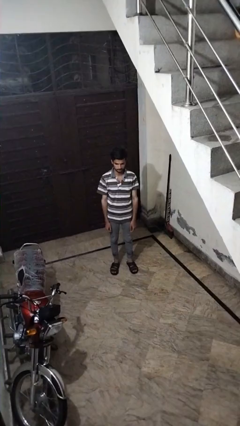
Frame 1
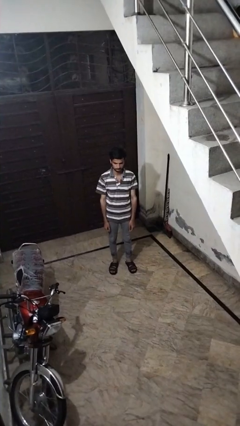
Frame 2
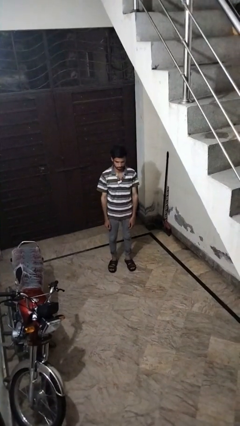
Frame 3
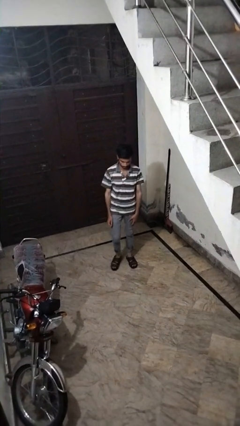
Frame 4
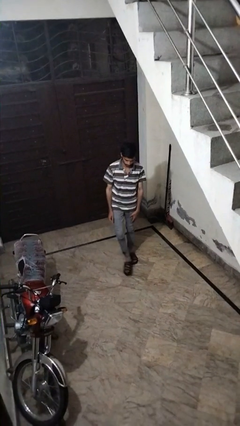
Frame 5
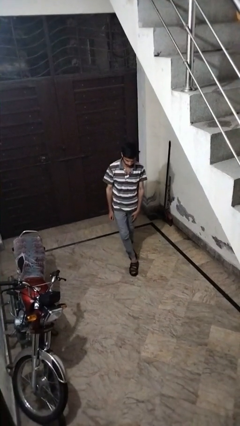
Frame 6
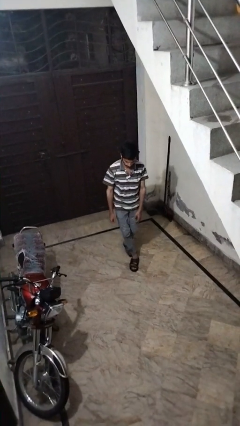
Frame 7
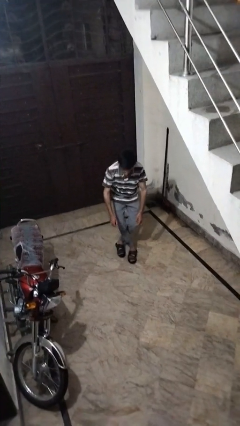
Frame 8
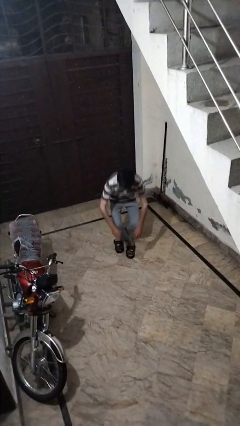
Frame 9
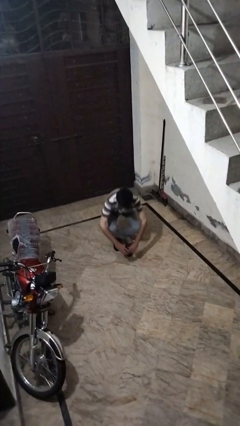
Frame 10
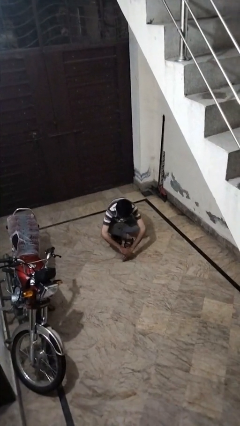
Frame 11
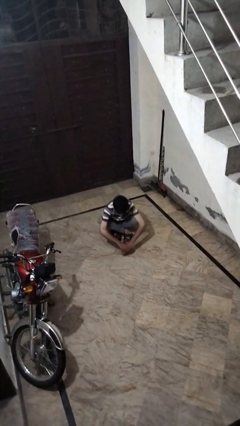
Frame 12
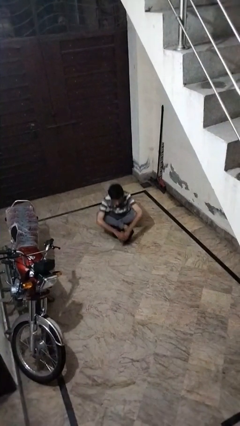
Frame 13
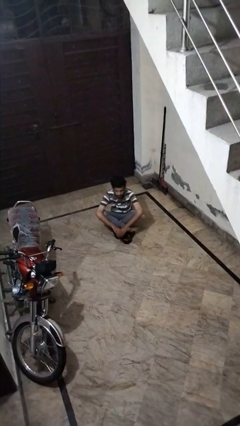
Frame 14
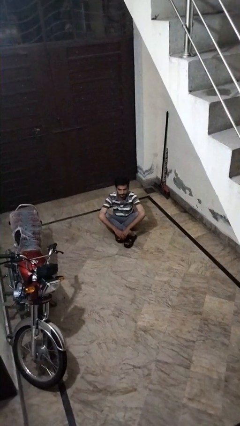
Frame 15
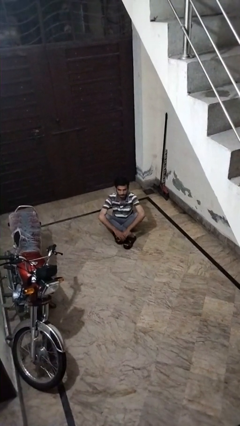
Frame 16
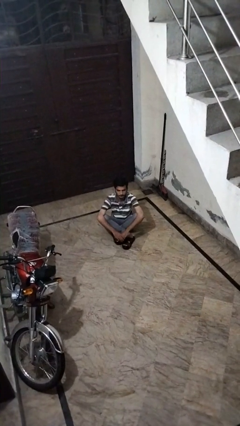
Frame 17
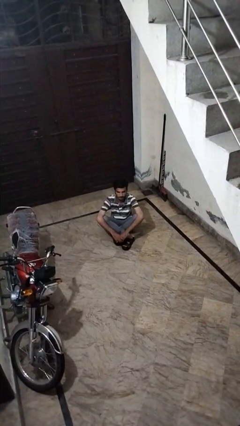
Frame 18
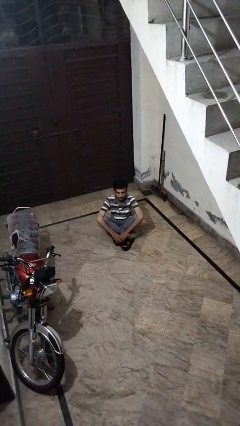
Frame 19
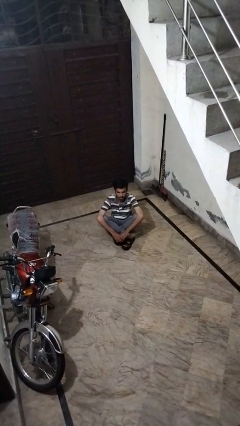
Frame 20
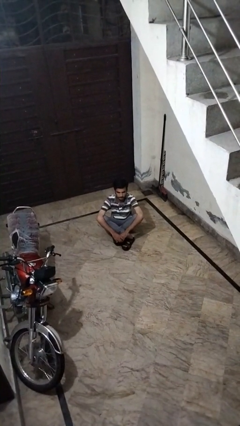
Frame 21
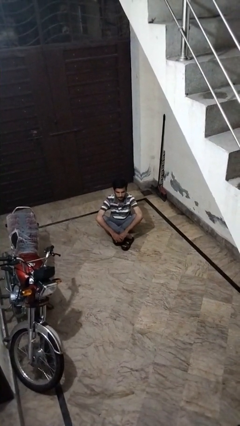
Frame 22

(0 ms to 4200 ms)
person sits crisscross

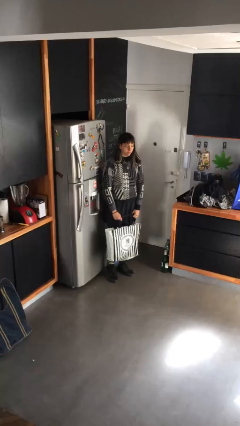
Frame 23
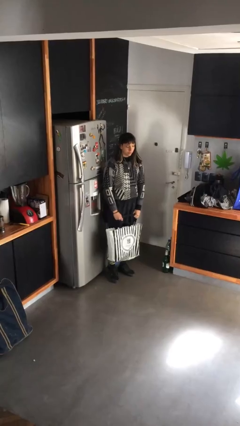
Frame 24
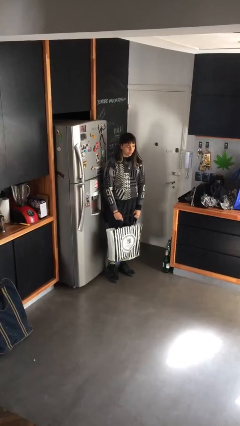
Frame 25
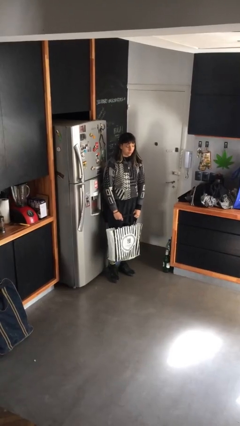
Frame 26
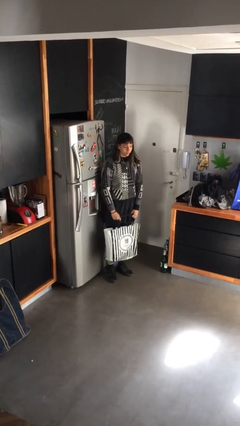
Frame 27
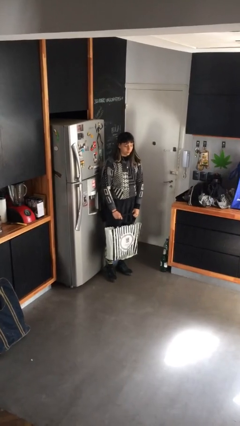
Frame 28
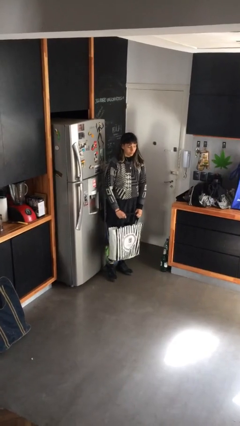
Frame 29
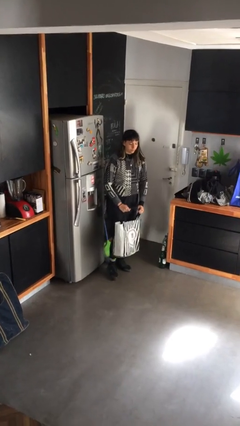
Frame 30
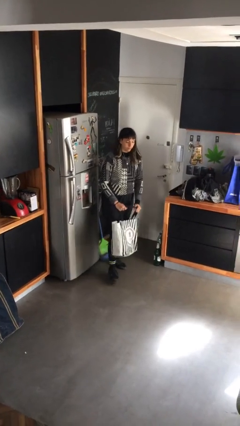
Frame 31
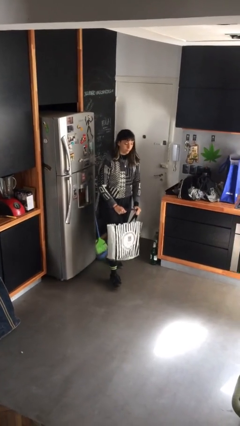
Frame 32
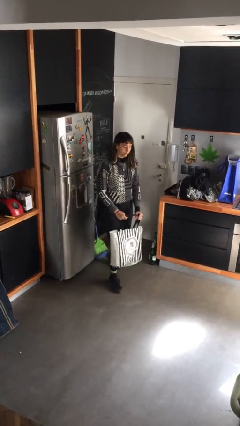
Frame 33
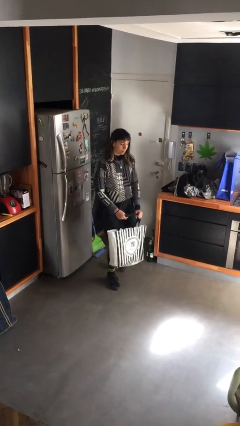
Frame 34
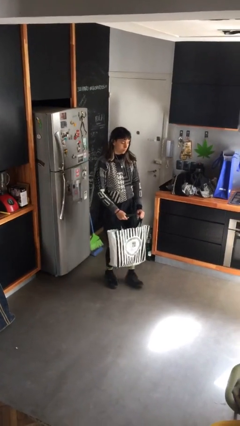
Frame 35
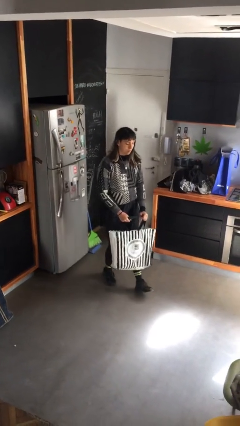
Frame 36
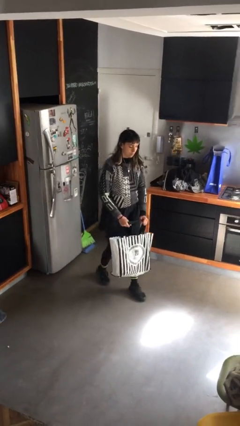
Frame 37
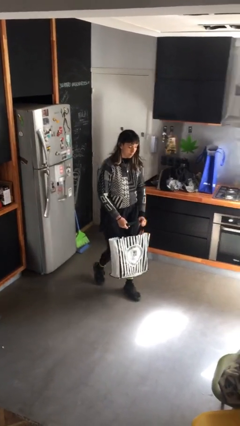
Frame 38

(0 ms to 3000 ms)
person carries heavy object

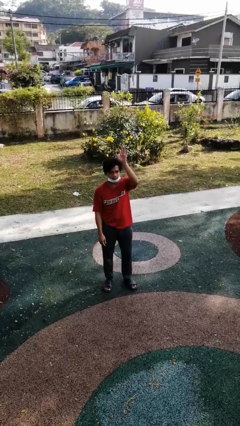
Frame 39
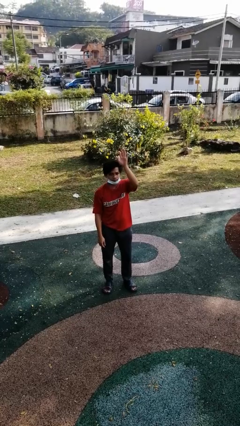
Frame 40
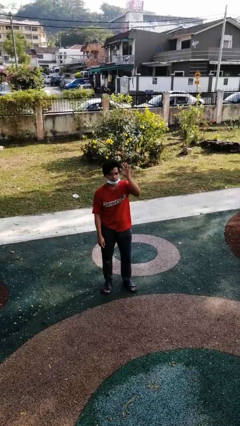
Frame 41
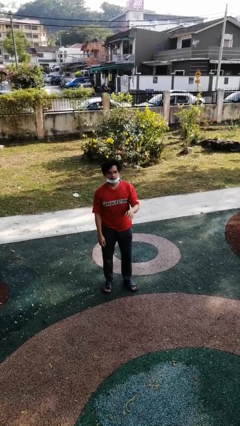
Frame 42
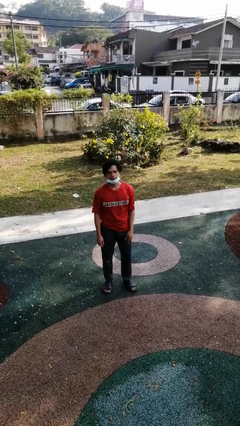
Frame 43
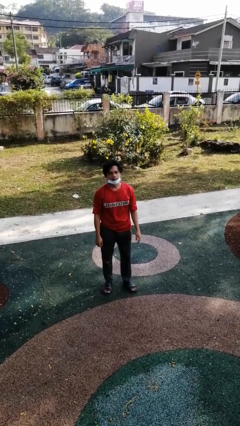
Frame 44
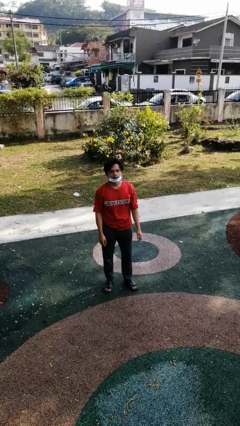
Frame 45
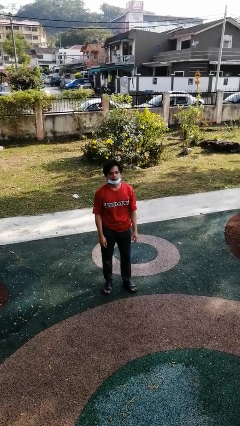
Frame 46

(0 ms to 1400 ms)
person gestures lower hand

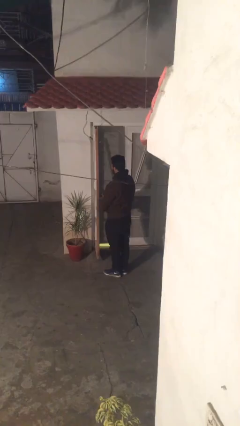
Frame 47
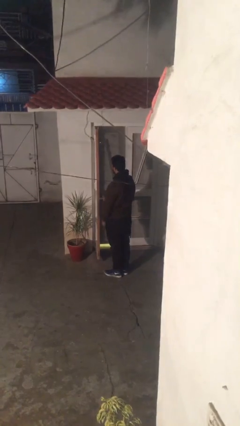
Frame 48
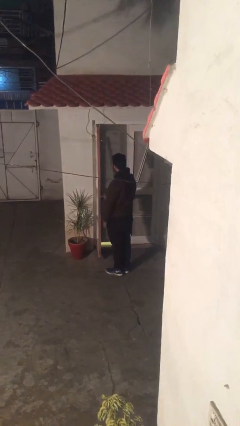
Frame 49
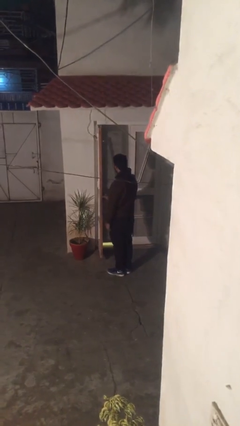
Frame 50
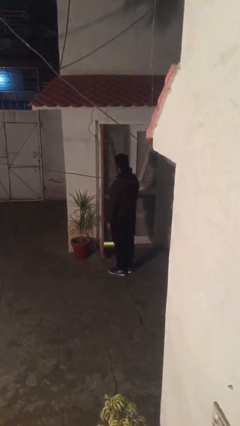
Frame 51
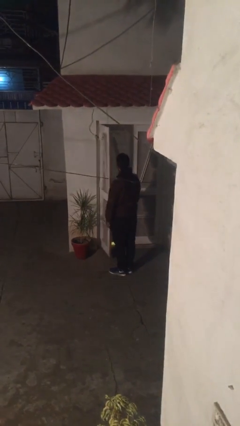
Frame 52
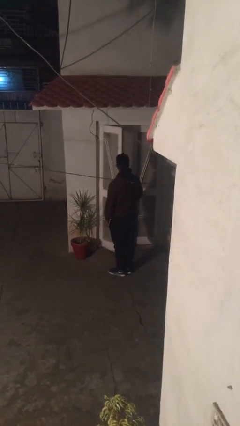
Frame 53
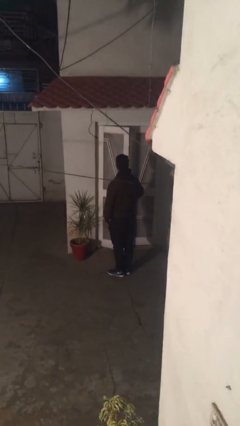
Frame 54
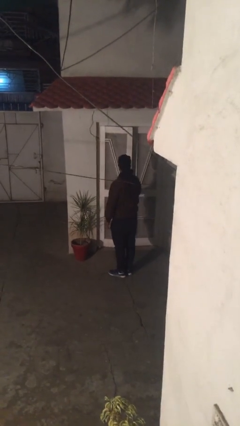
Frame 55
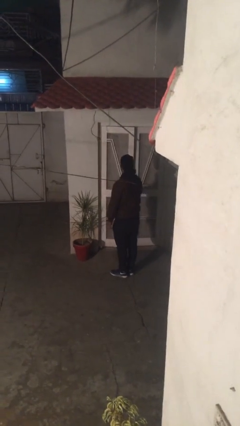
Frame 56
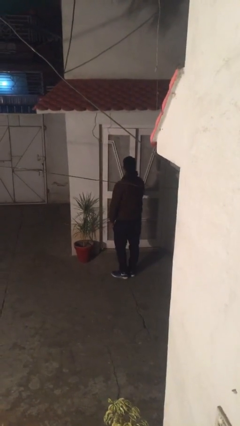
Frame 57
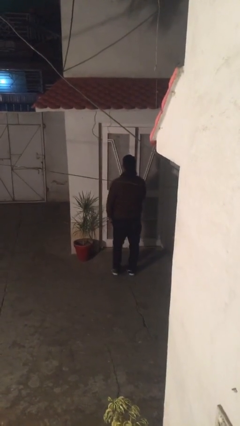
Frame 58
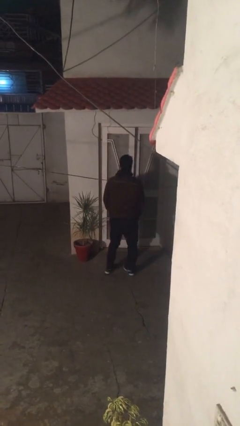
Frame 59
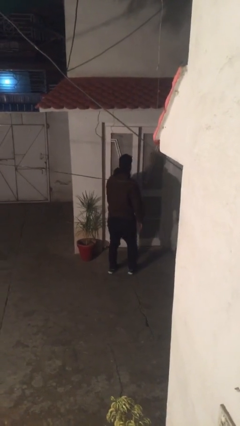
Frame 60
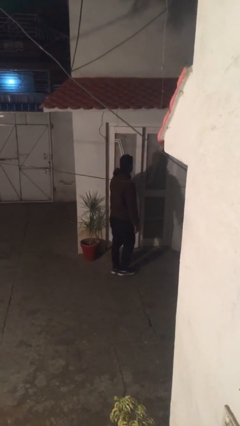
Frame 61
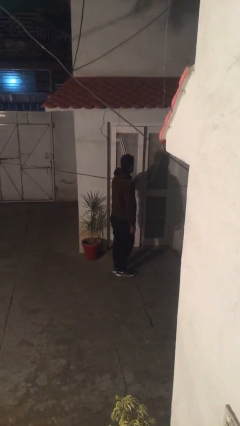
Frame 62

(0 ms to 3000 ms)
person closes facility door

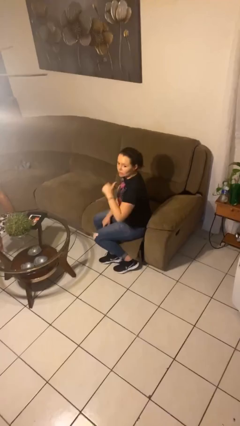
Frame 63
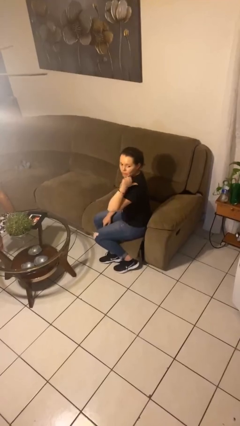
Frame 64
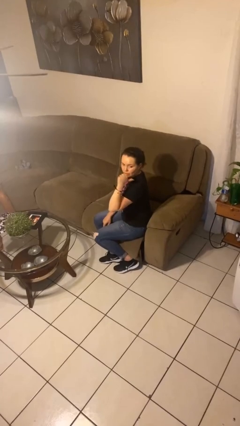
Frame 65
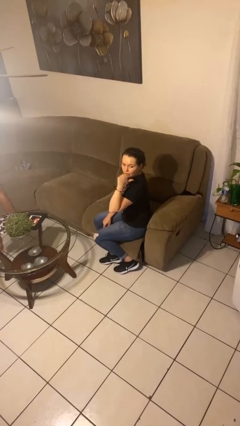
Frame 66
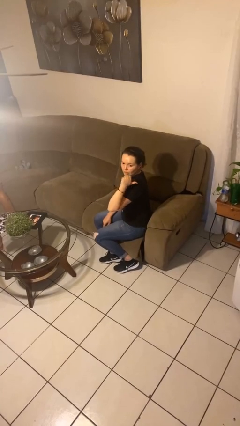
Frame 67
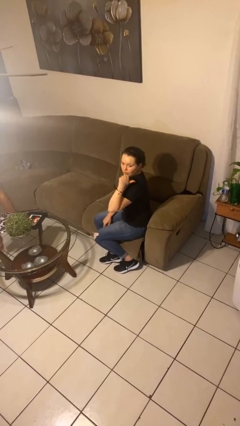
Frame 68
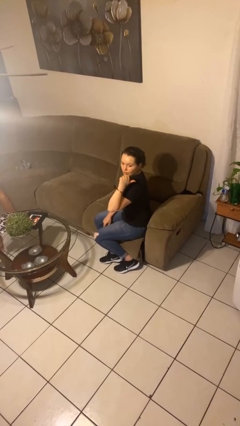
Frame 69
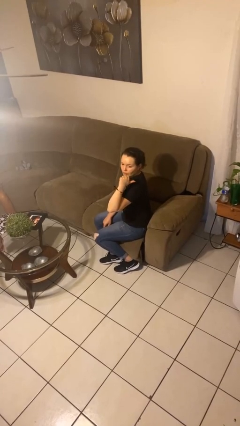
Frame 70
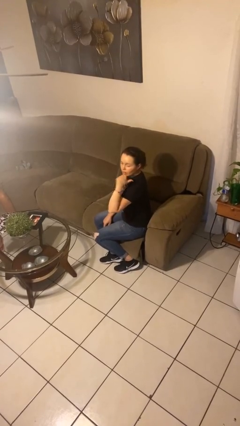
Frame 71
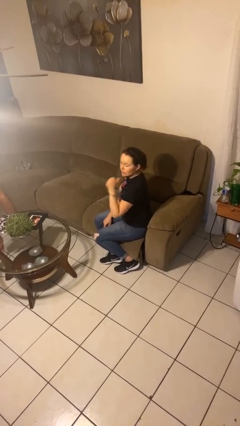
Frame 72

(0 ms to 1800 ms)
person gestures behind me

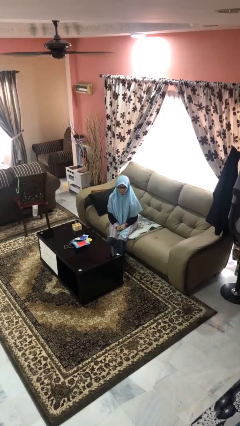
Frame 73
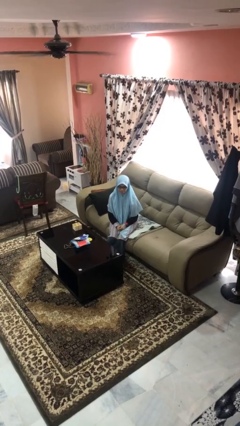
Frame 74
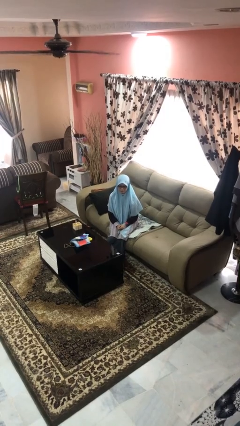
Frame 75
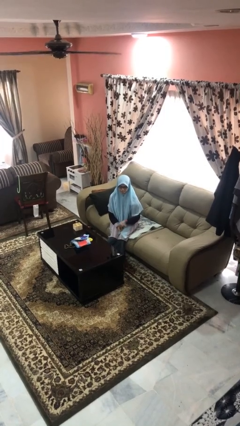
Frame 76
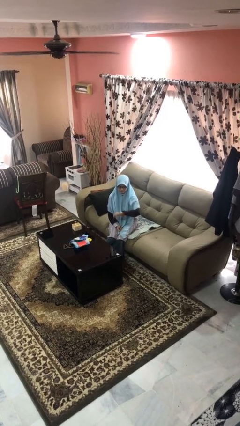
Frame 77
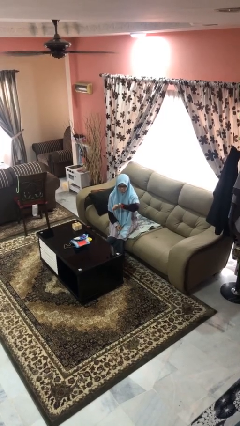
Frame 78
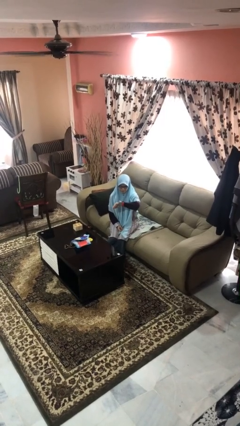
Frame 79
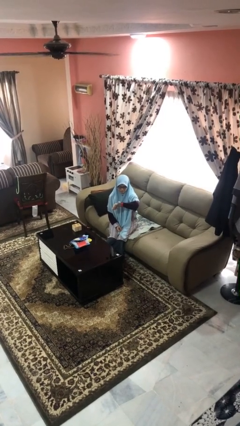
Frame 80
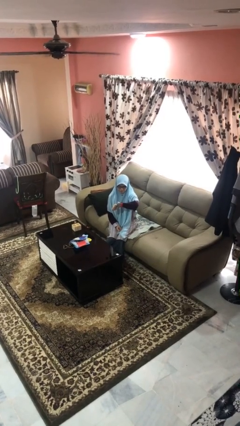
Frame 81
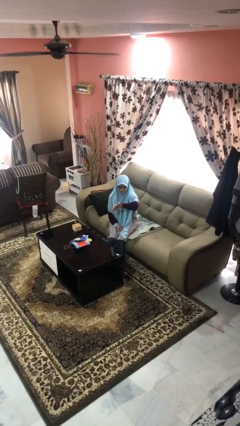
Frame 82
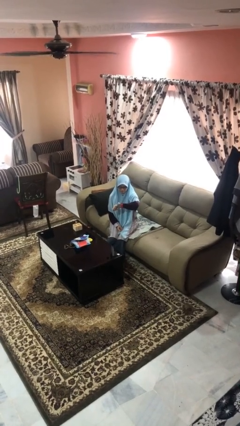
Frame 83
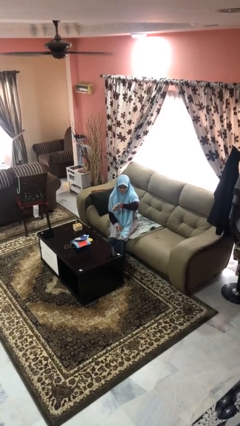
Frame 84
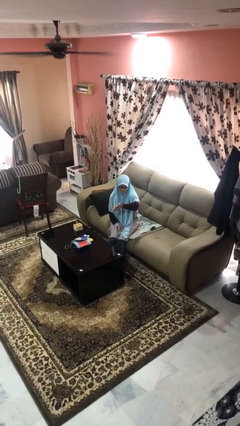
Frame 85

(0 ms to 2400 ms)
person looks at wristwatch

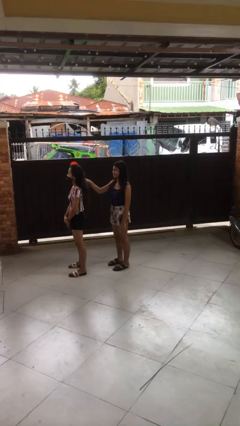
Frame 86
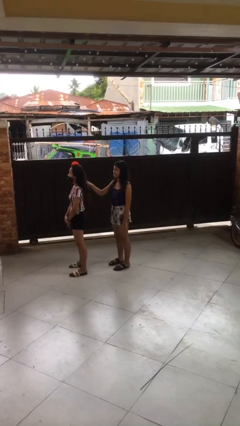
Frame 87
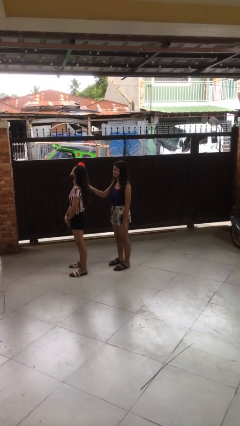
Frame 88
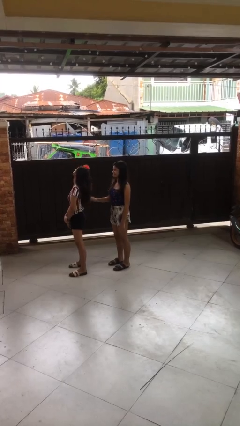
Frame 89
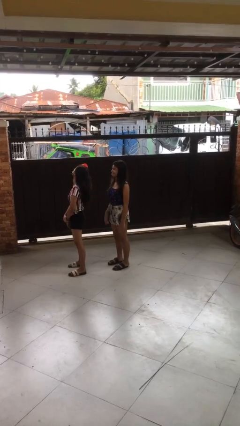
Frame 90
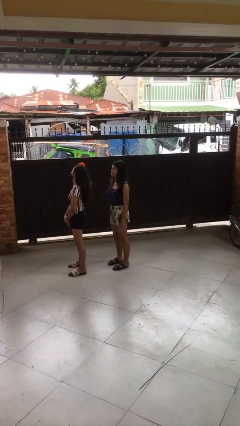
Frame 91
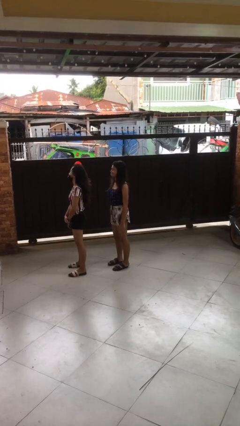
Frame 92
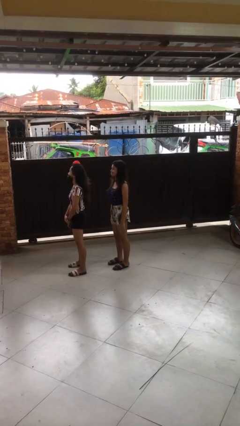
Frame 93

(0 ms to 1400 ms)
person grabs person by hair
